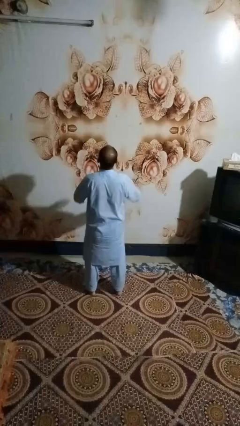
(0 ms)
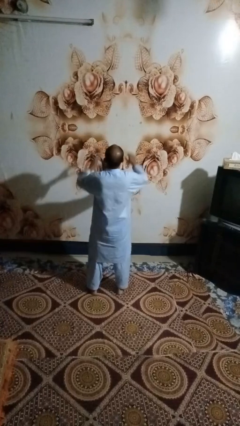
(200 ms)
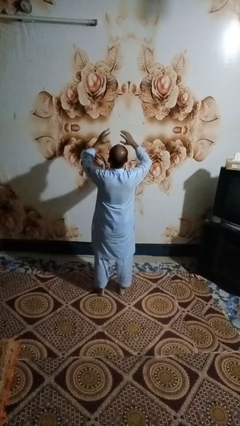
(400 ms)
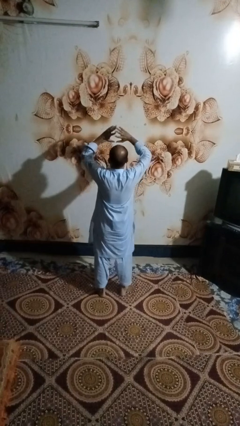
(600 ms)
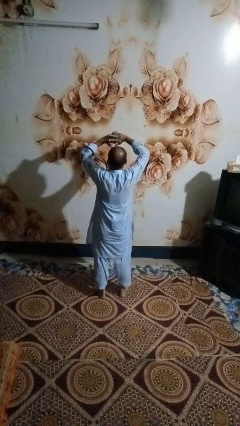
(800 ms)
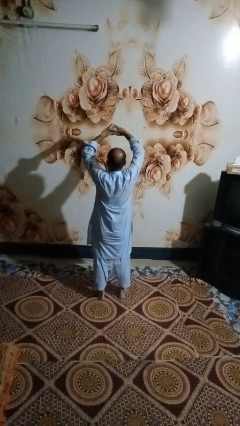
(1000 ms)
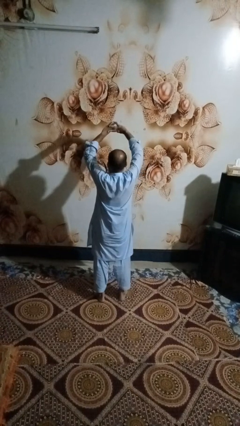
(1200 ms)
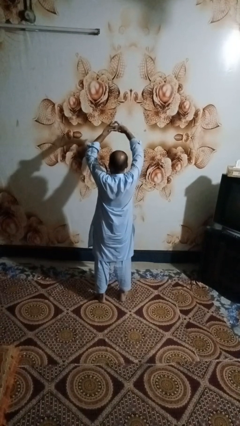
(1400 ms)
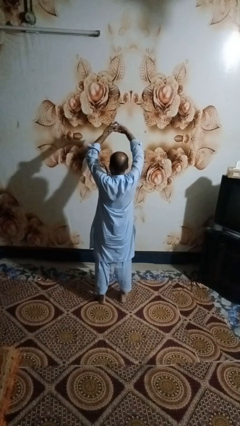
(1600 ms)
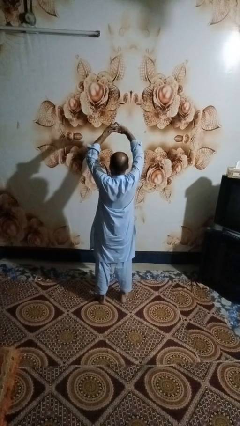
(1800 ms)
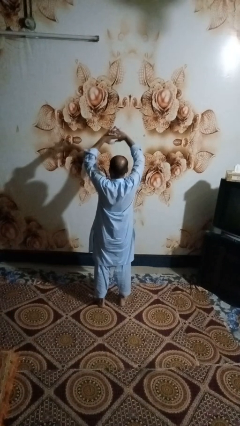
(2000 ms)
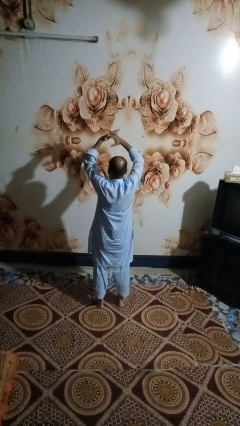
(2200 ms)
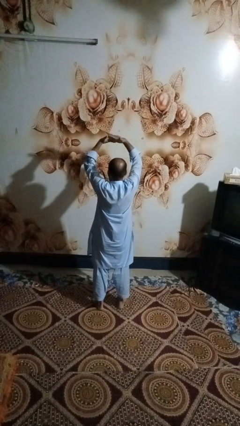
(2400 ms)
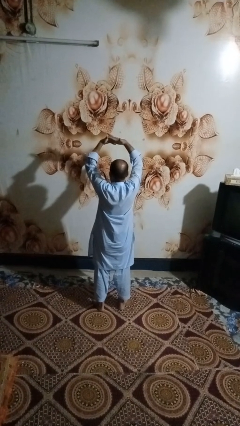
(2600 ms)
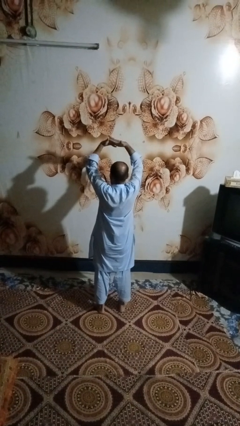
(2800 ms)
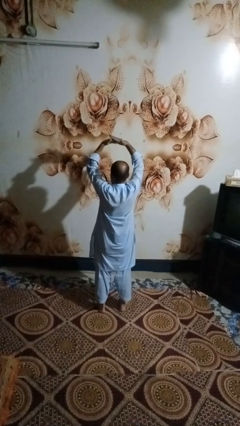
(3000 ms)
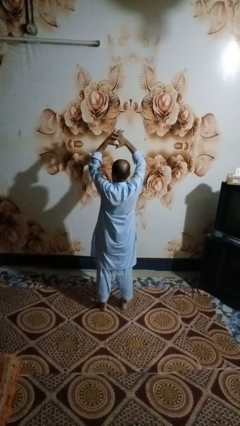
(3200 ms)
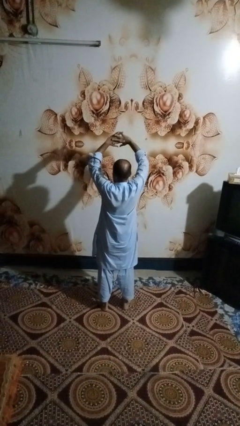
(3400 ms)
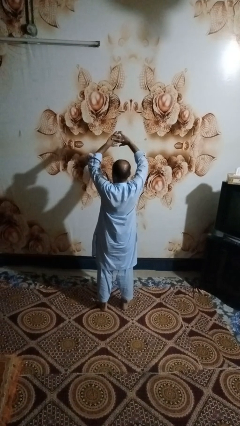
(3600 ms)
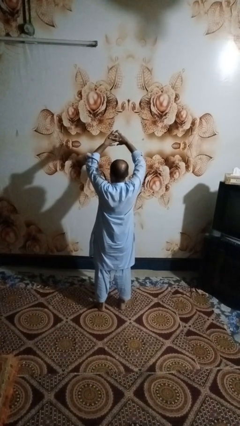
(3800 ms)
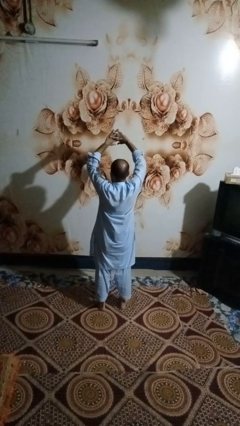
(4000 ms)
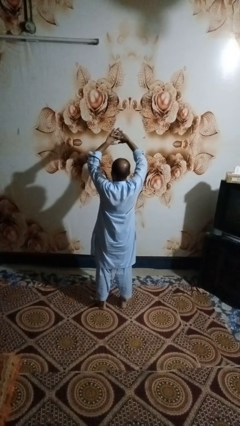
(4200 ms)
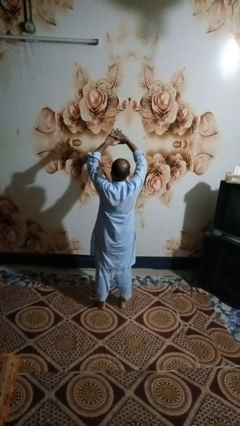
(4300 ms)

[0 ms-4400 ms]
person cracks knuckles

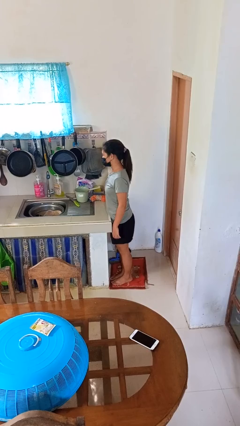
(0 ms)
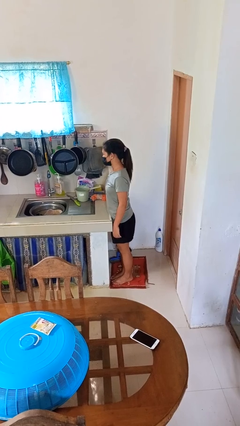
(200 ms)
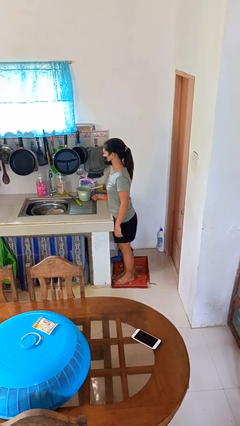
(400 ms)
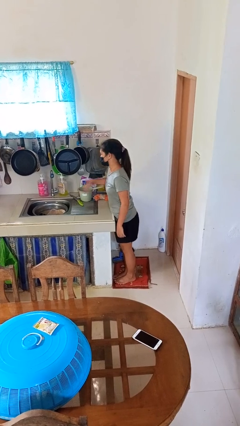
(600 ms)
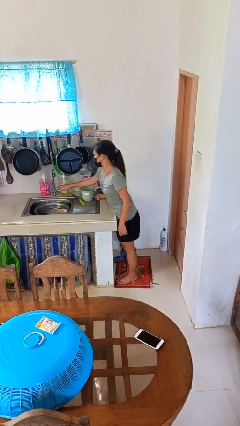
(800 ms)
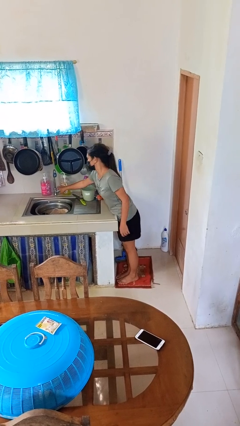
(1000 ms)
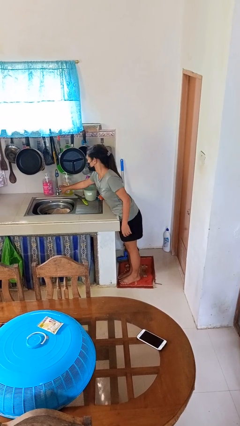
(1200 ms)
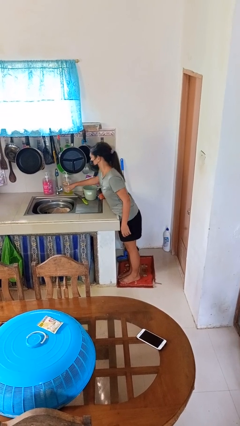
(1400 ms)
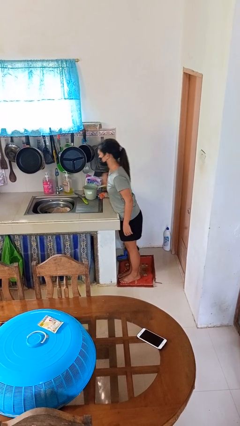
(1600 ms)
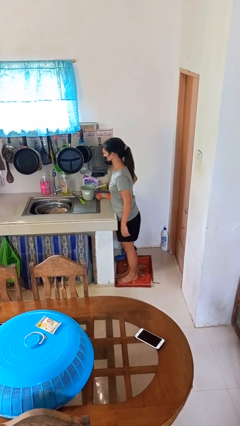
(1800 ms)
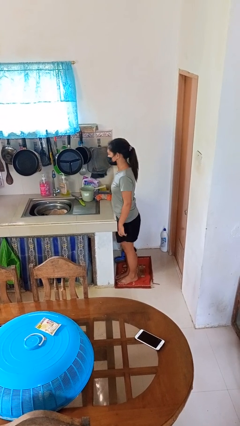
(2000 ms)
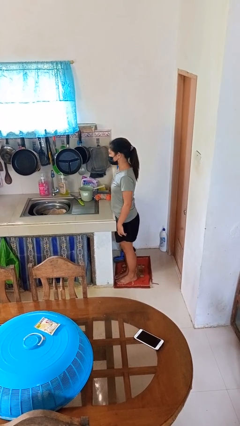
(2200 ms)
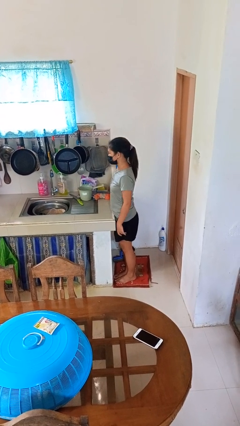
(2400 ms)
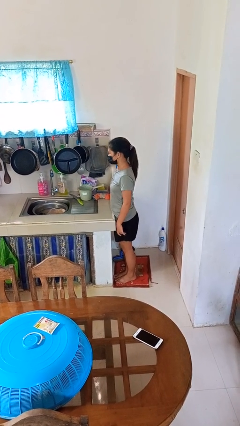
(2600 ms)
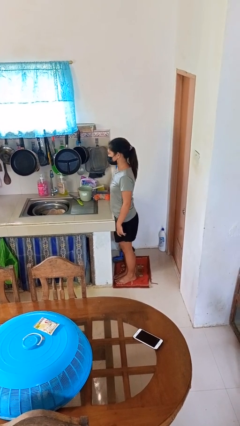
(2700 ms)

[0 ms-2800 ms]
person turns off faucet

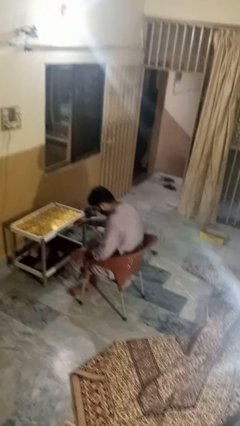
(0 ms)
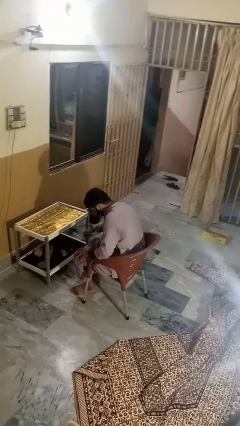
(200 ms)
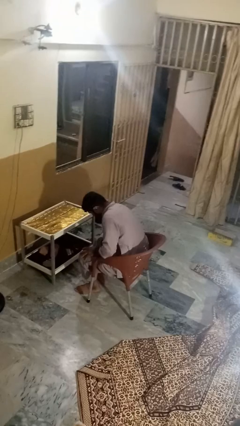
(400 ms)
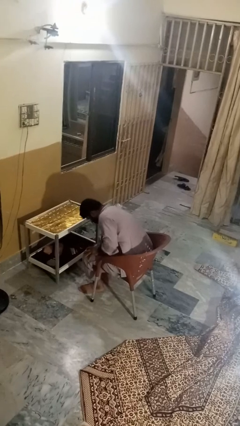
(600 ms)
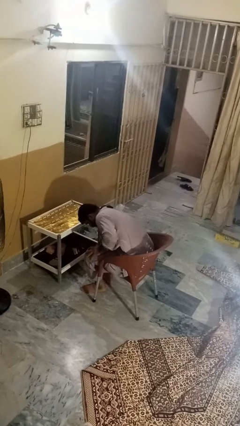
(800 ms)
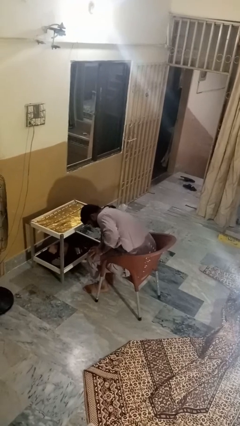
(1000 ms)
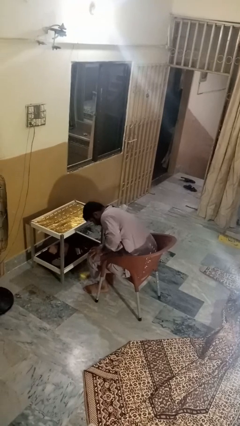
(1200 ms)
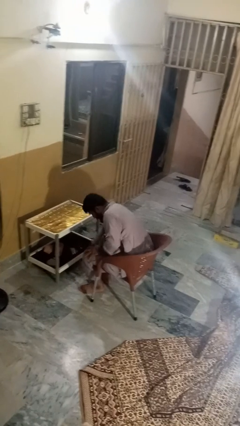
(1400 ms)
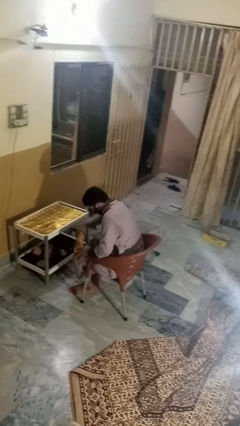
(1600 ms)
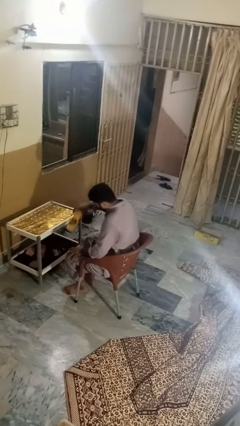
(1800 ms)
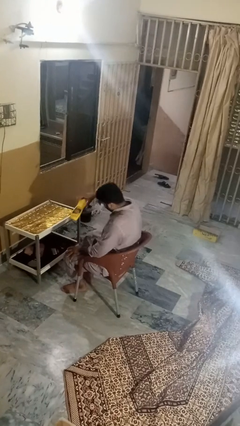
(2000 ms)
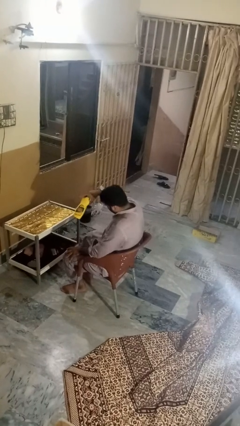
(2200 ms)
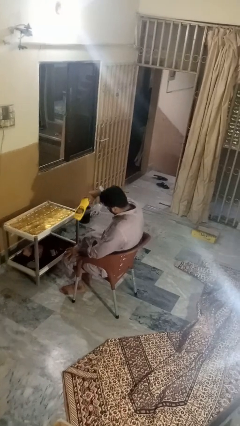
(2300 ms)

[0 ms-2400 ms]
person picks up object from floor

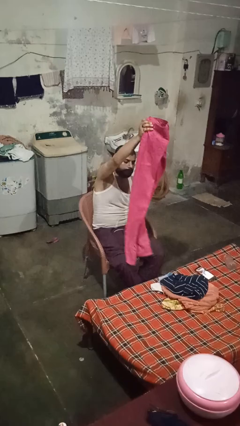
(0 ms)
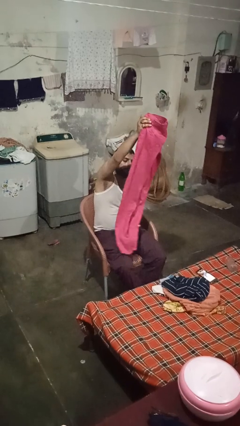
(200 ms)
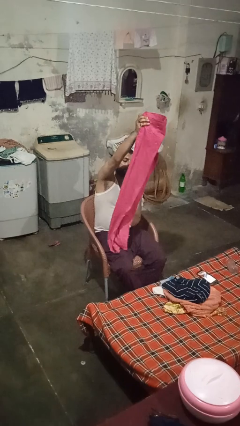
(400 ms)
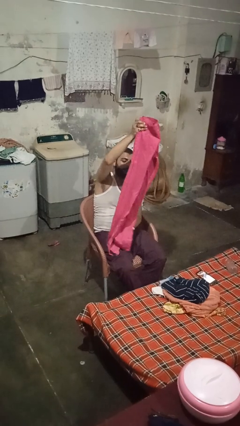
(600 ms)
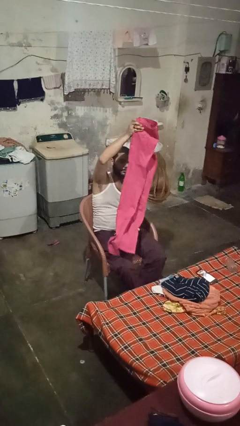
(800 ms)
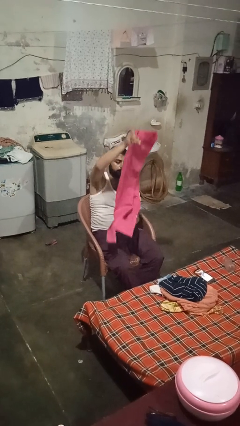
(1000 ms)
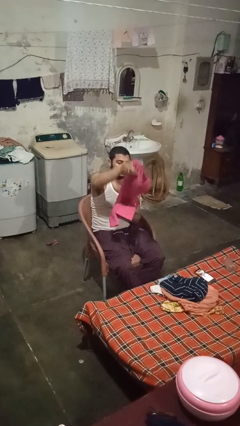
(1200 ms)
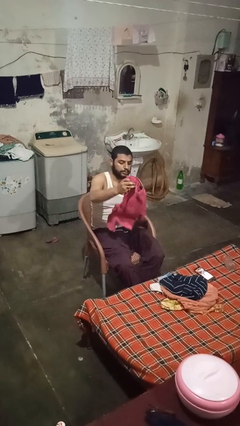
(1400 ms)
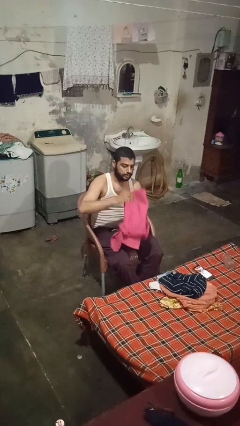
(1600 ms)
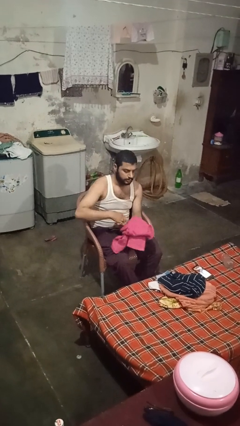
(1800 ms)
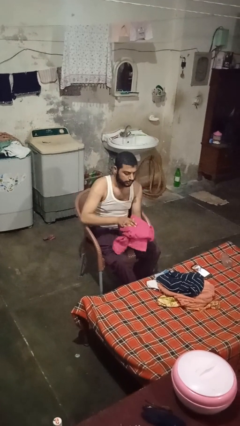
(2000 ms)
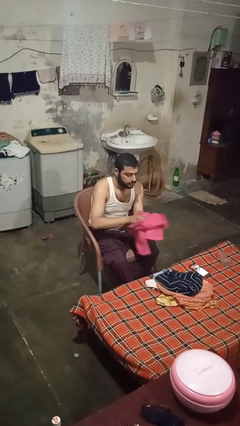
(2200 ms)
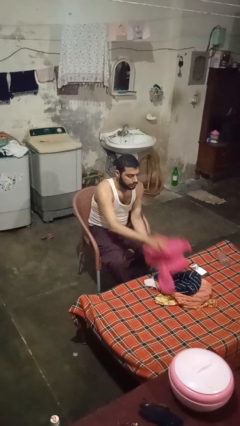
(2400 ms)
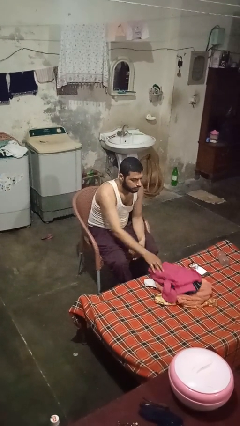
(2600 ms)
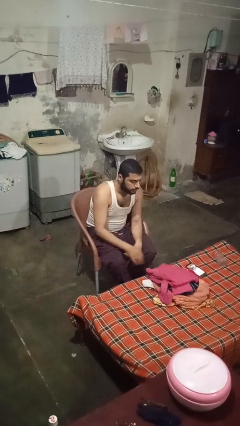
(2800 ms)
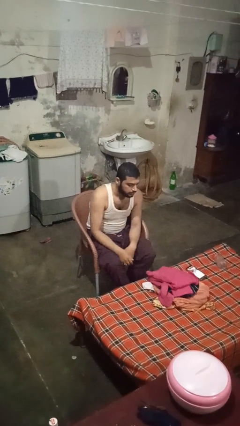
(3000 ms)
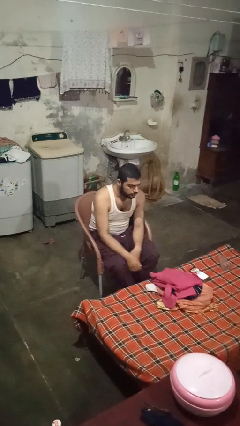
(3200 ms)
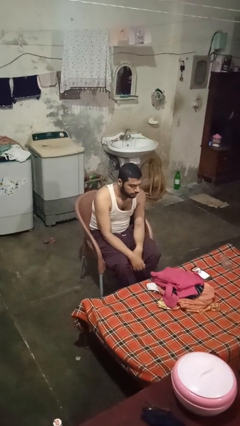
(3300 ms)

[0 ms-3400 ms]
person folds pants

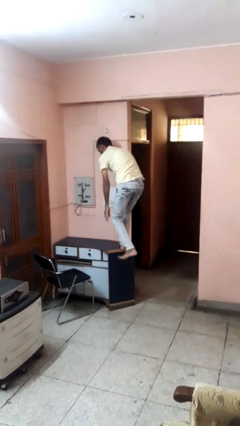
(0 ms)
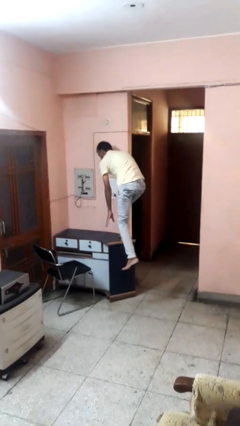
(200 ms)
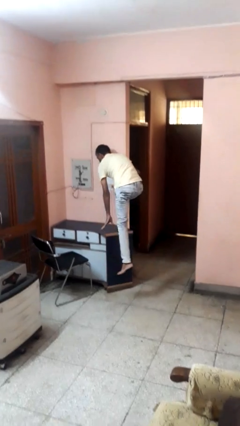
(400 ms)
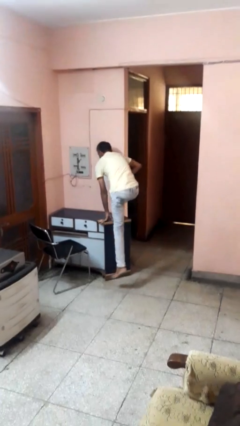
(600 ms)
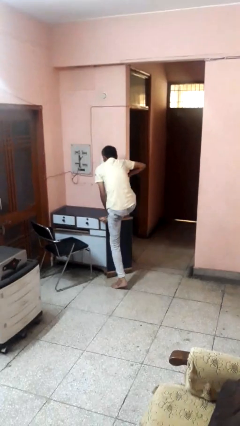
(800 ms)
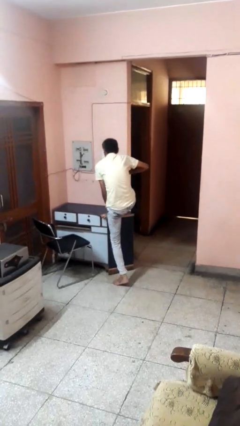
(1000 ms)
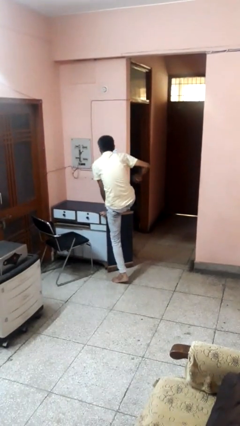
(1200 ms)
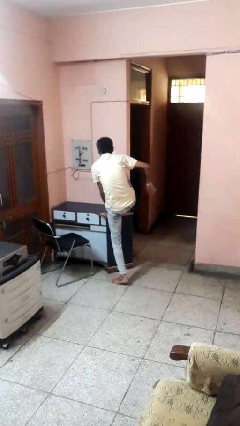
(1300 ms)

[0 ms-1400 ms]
person climbs off table

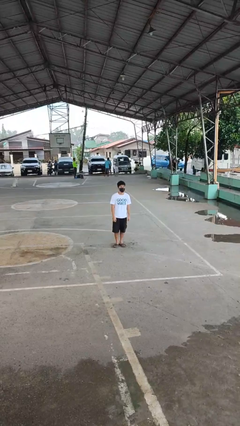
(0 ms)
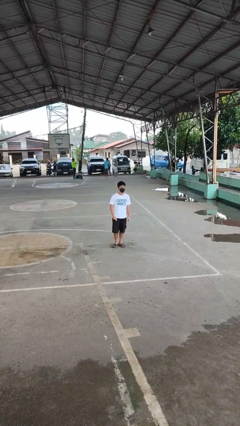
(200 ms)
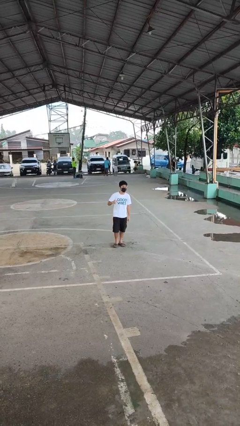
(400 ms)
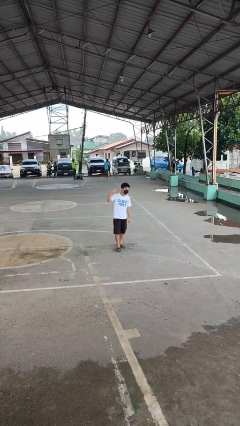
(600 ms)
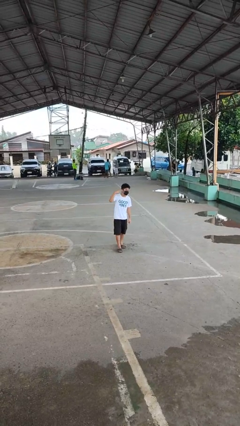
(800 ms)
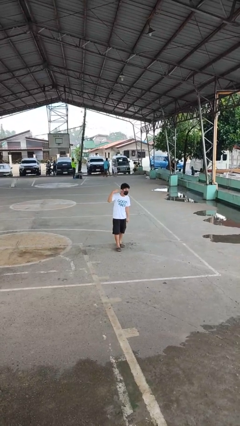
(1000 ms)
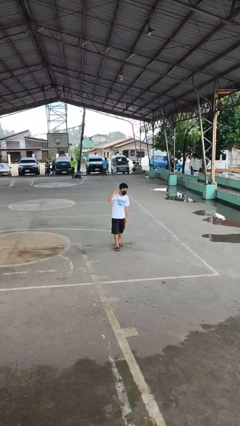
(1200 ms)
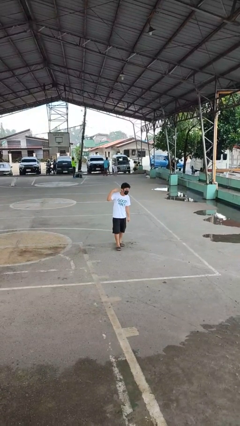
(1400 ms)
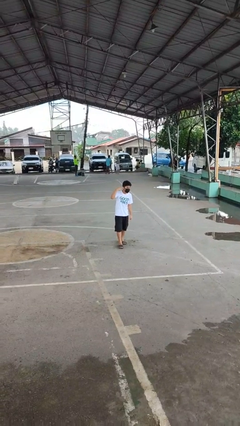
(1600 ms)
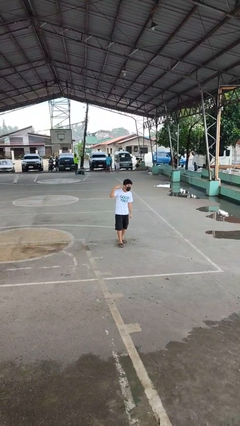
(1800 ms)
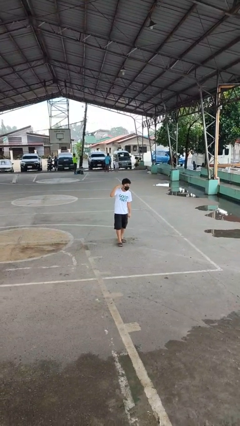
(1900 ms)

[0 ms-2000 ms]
person gestures listen closely

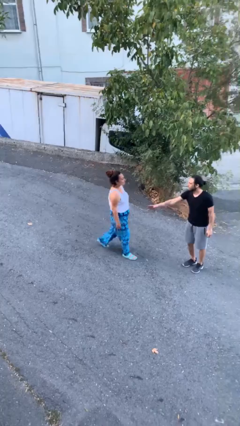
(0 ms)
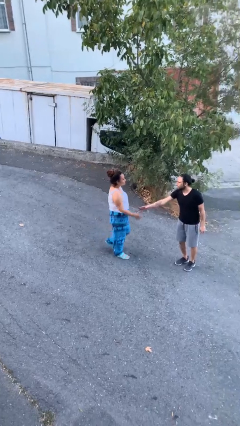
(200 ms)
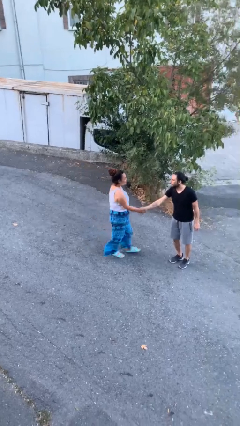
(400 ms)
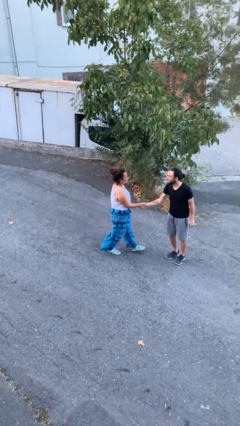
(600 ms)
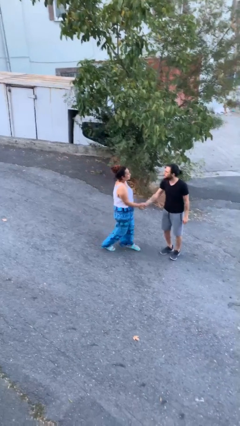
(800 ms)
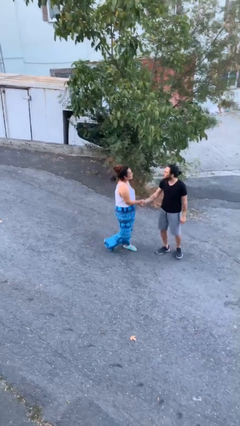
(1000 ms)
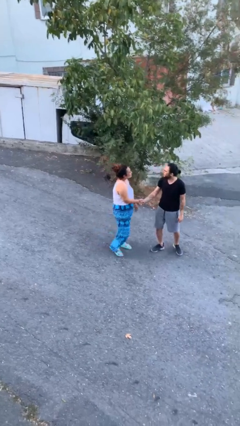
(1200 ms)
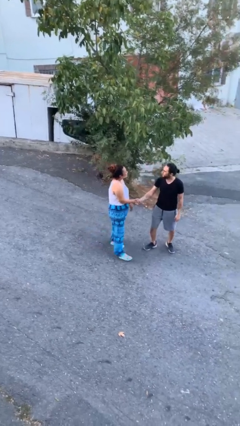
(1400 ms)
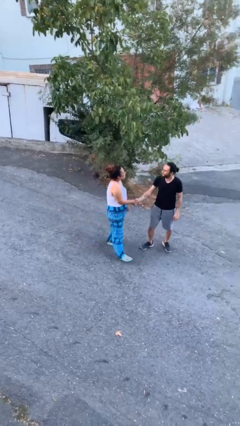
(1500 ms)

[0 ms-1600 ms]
person shakes hand
